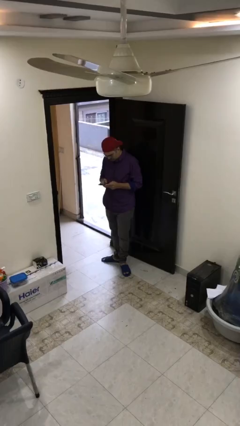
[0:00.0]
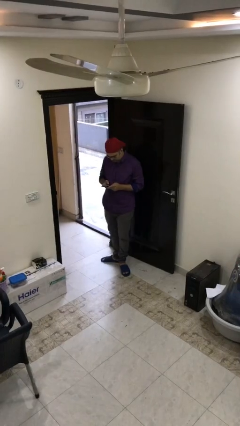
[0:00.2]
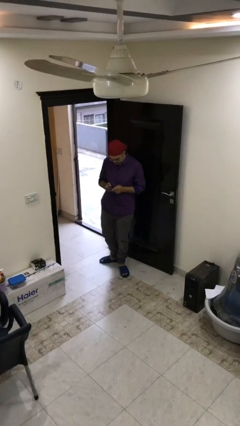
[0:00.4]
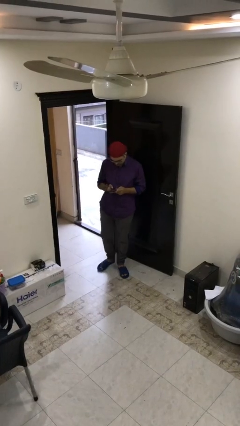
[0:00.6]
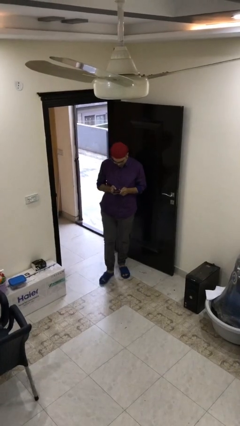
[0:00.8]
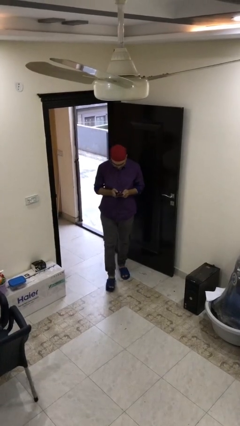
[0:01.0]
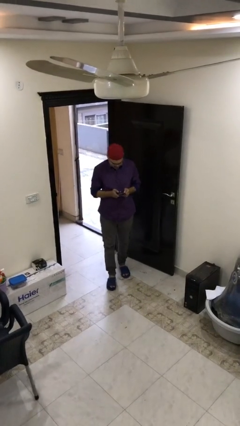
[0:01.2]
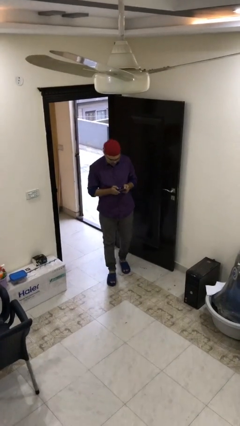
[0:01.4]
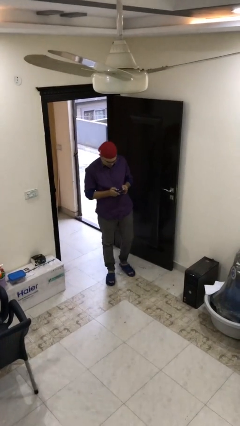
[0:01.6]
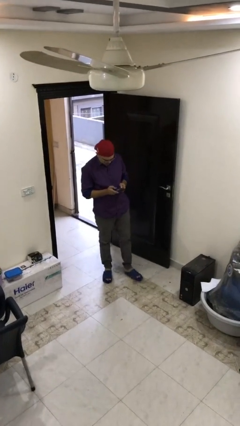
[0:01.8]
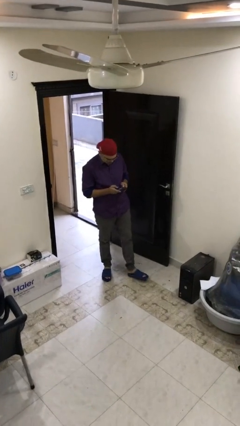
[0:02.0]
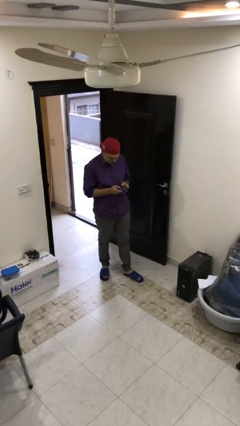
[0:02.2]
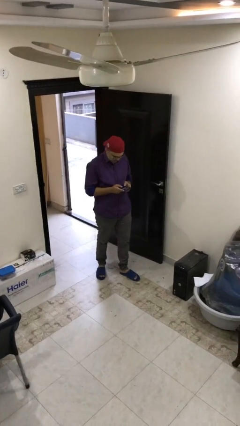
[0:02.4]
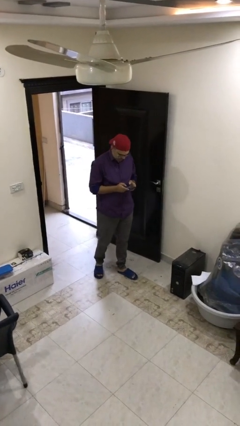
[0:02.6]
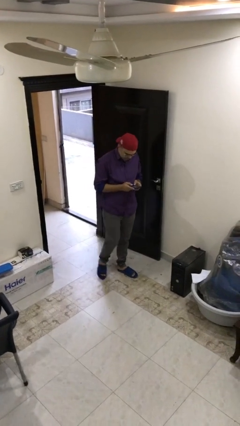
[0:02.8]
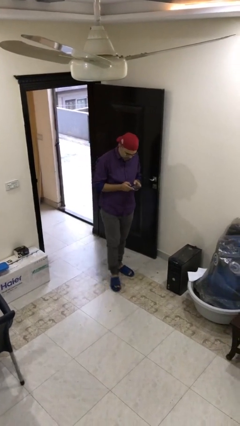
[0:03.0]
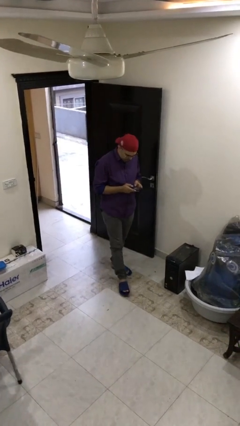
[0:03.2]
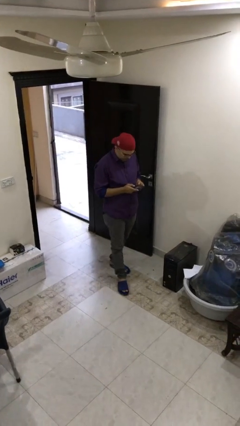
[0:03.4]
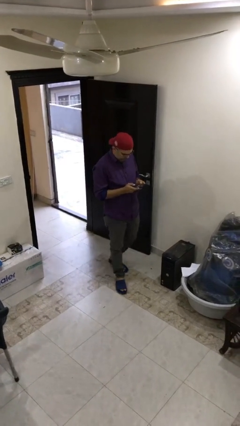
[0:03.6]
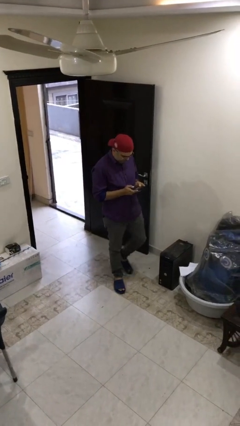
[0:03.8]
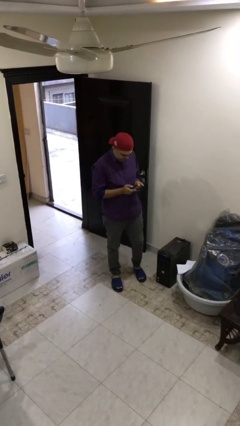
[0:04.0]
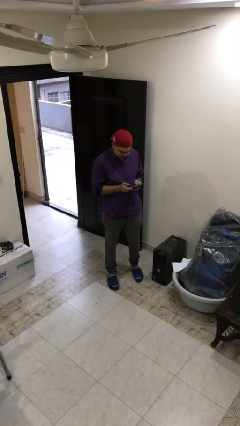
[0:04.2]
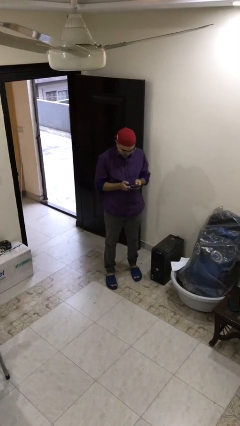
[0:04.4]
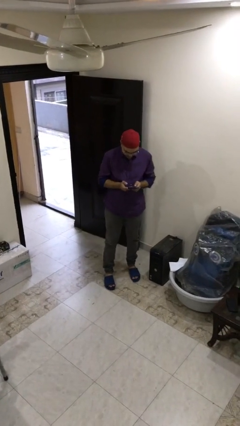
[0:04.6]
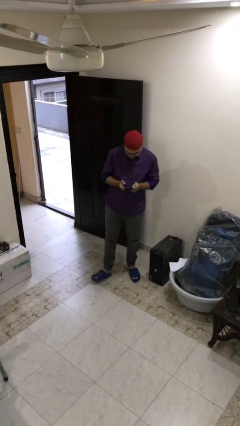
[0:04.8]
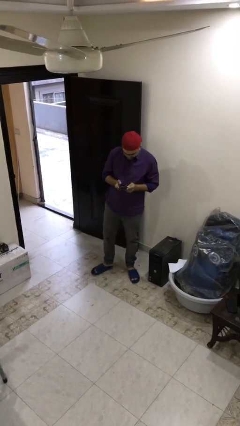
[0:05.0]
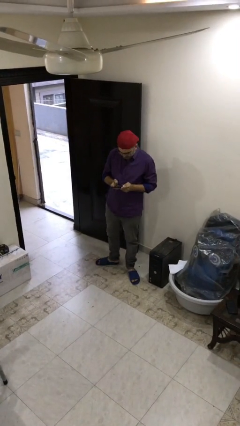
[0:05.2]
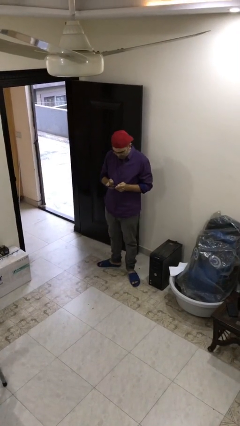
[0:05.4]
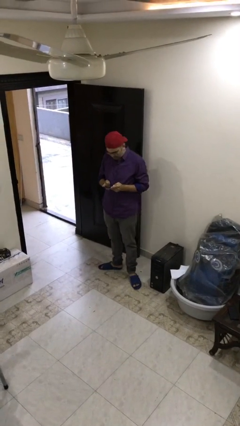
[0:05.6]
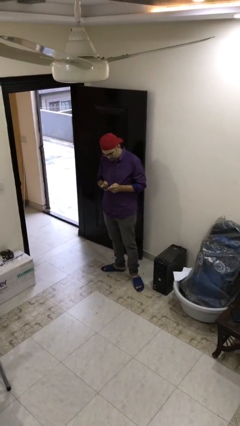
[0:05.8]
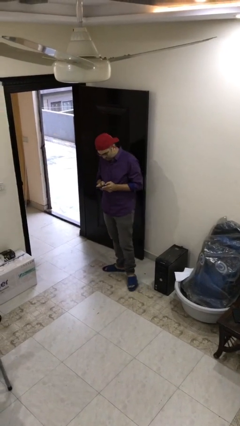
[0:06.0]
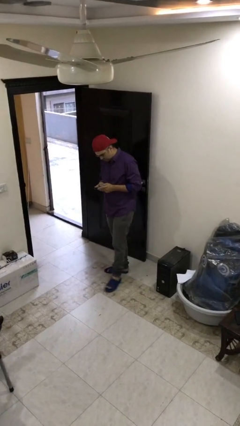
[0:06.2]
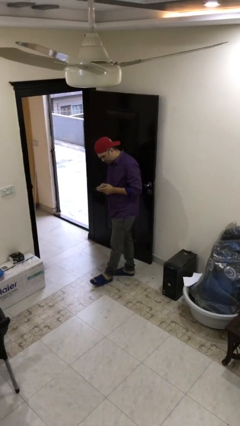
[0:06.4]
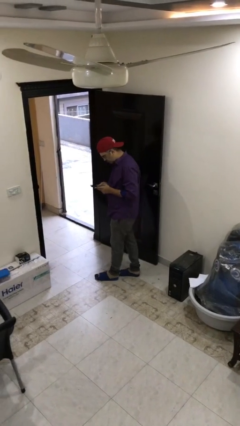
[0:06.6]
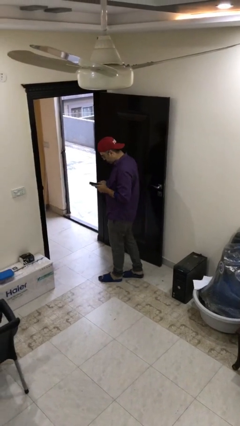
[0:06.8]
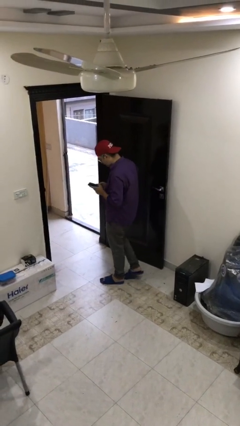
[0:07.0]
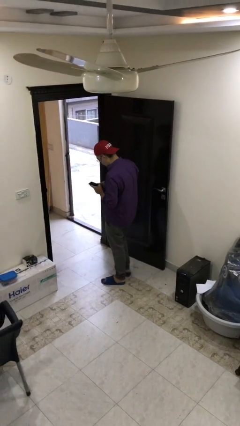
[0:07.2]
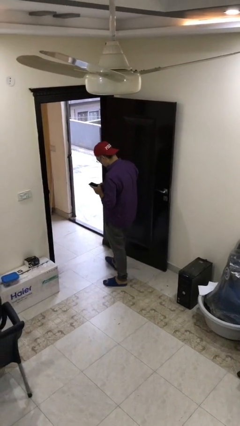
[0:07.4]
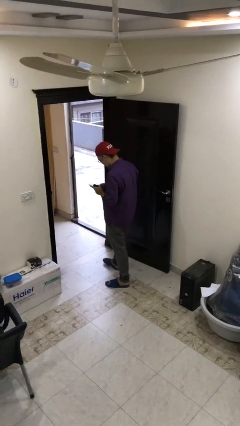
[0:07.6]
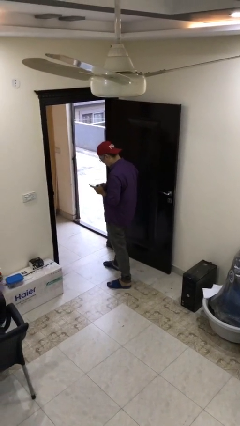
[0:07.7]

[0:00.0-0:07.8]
person texts on phone

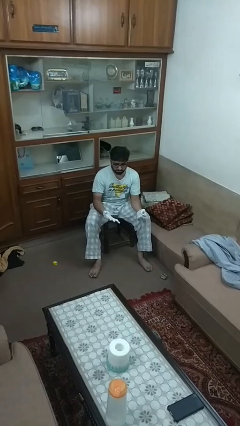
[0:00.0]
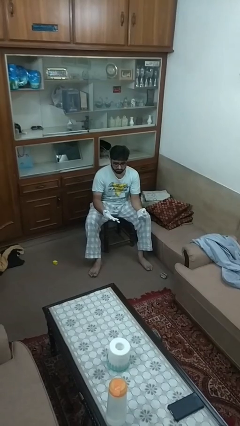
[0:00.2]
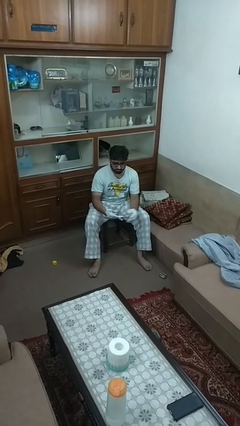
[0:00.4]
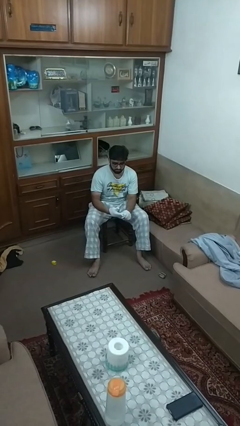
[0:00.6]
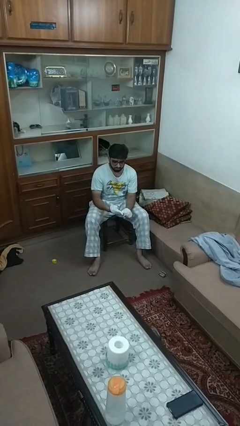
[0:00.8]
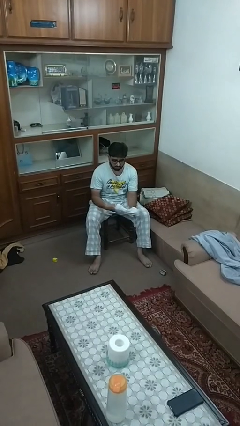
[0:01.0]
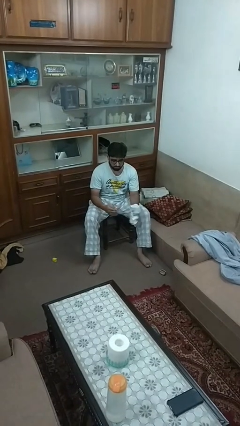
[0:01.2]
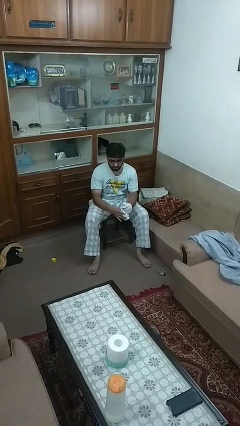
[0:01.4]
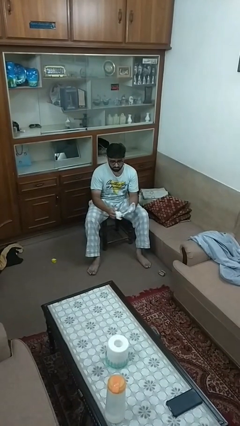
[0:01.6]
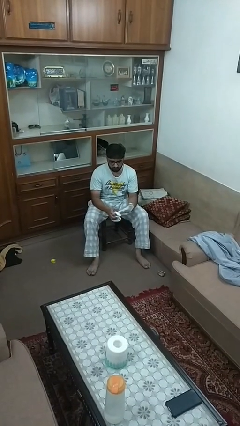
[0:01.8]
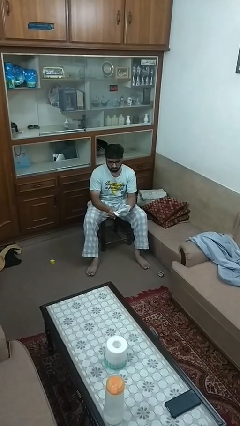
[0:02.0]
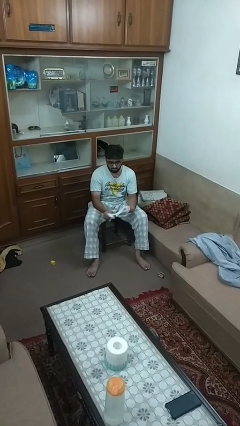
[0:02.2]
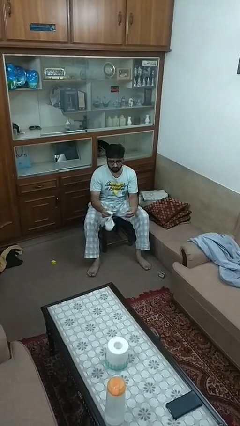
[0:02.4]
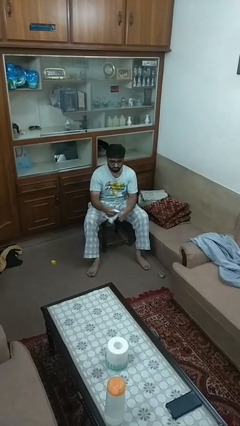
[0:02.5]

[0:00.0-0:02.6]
person takes off gloves

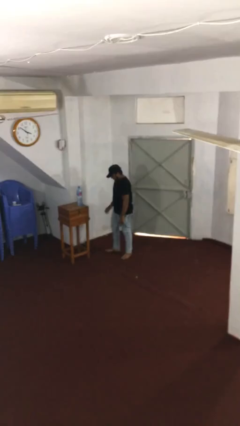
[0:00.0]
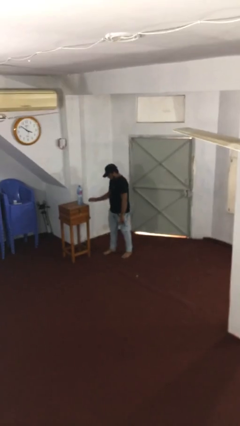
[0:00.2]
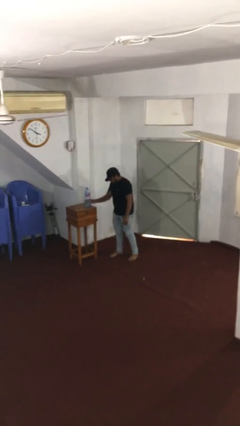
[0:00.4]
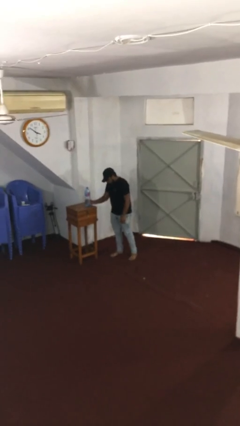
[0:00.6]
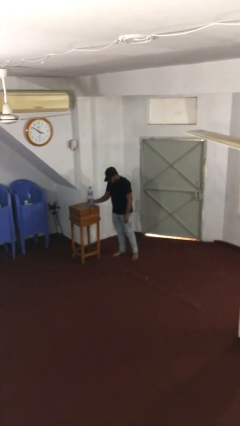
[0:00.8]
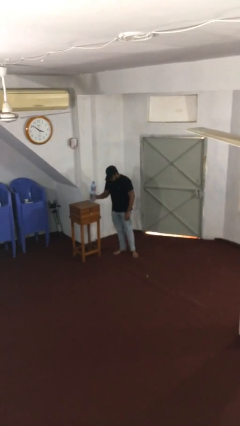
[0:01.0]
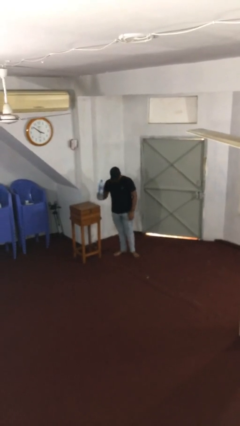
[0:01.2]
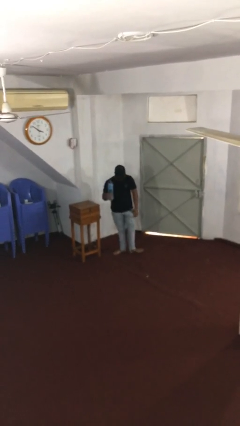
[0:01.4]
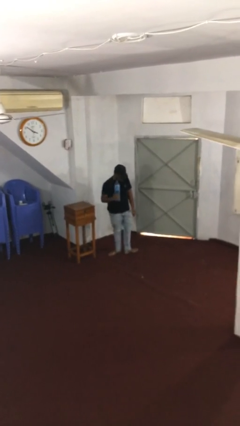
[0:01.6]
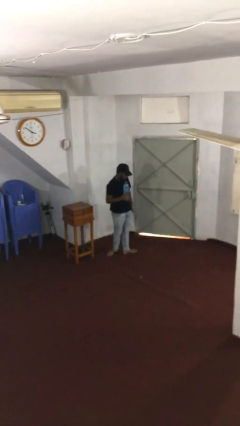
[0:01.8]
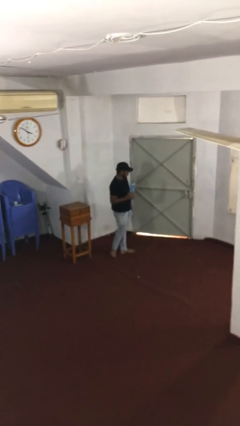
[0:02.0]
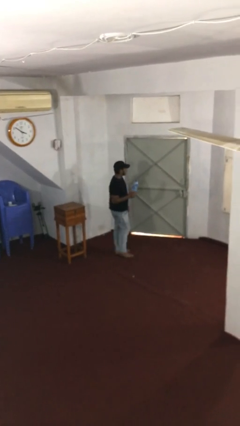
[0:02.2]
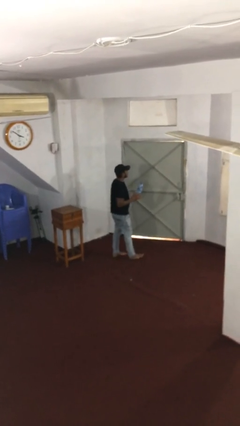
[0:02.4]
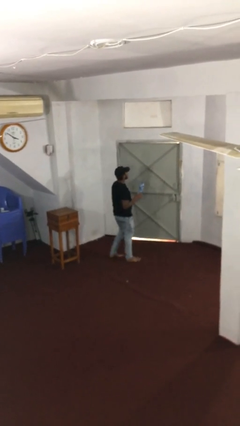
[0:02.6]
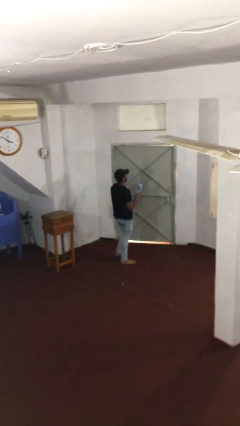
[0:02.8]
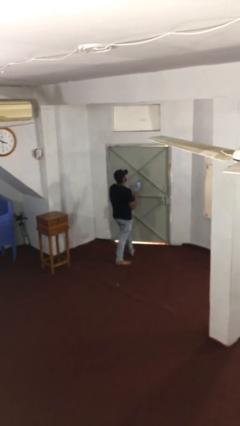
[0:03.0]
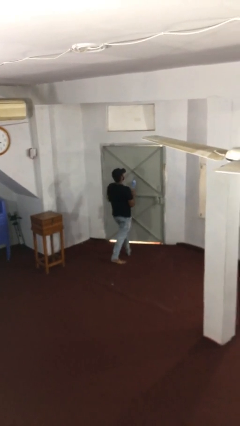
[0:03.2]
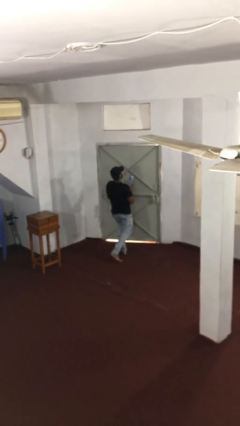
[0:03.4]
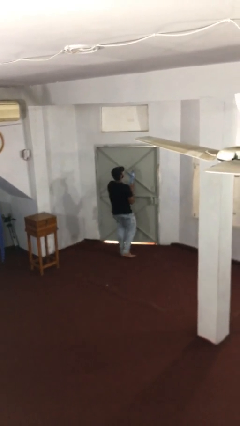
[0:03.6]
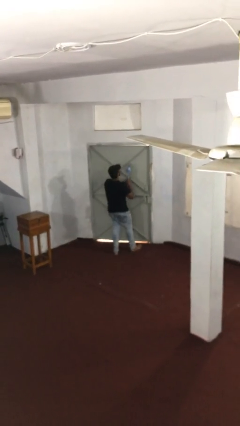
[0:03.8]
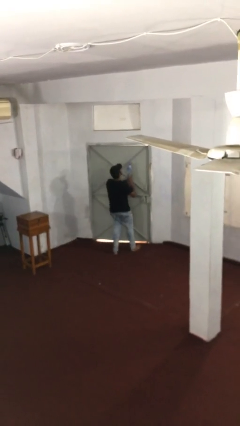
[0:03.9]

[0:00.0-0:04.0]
person picks up object from table

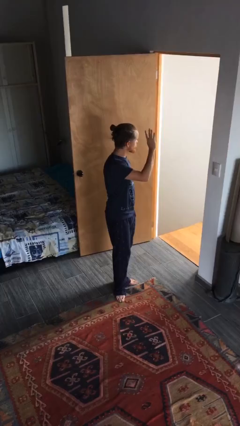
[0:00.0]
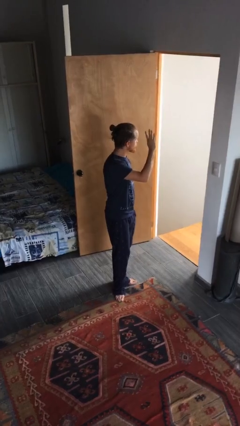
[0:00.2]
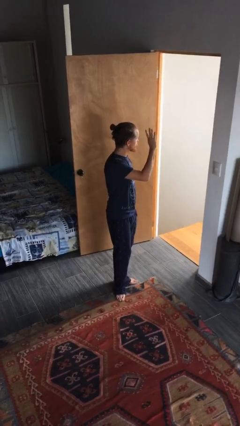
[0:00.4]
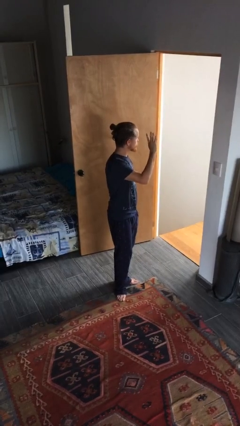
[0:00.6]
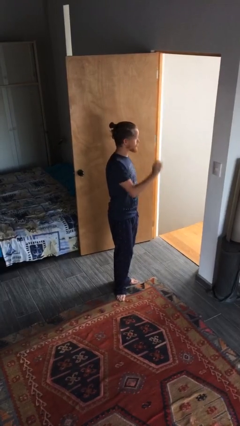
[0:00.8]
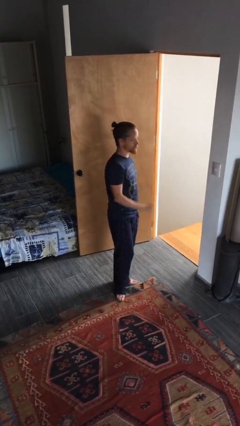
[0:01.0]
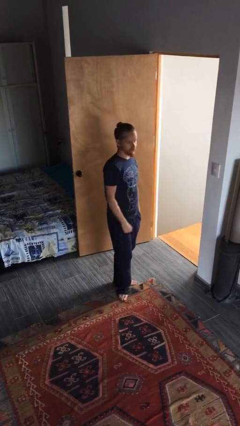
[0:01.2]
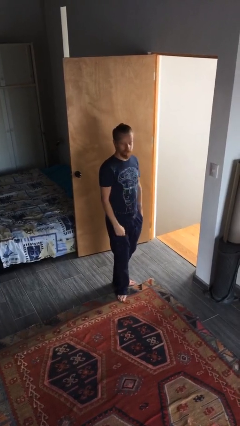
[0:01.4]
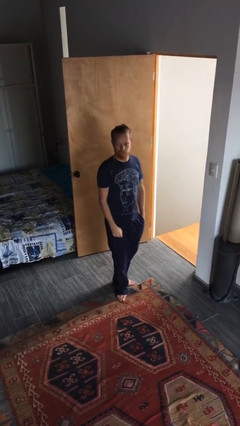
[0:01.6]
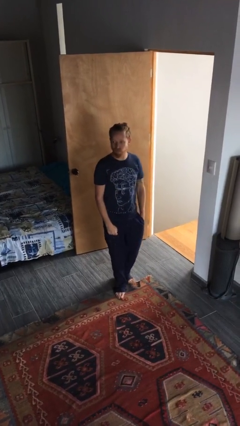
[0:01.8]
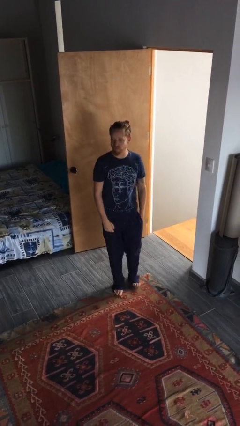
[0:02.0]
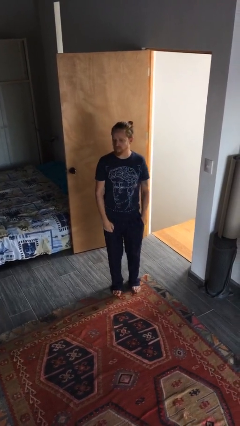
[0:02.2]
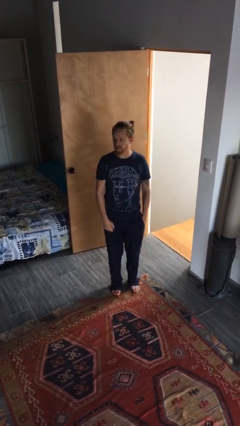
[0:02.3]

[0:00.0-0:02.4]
person gestures lower hand

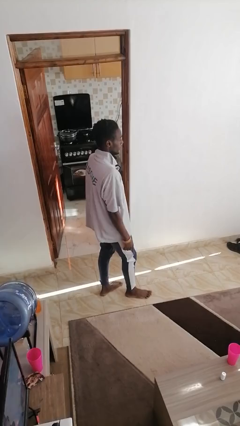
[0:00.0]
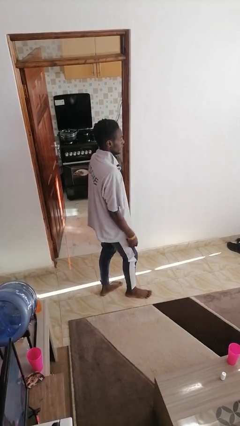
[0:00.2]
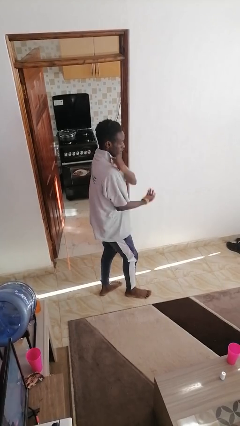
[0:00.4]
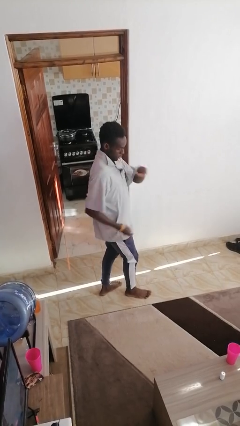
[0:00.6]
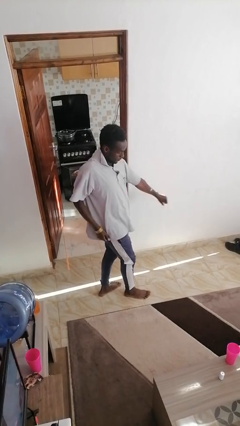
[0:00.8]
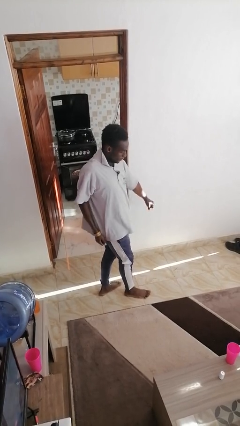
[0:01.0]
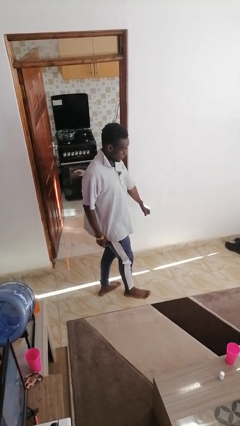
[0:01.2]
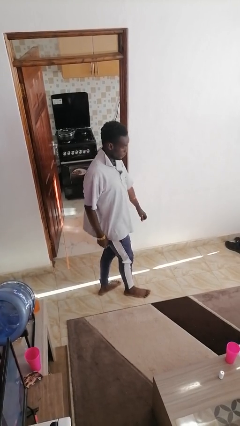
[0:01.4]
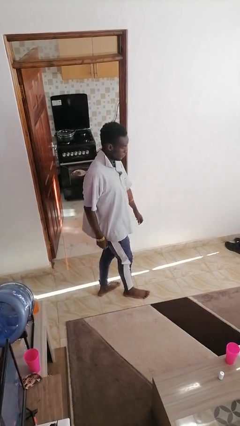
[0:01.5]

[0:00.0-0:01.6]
person karate chop
